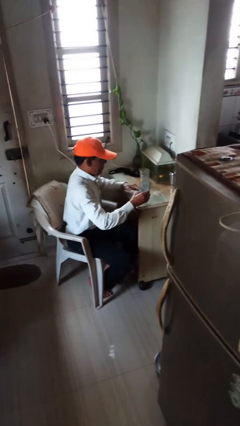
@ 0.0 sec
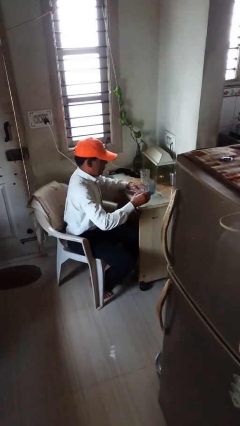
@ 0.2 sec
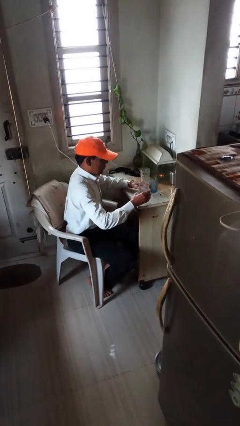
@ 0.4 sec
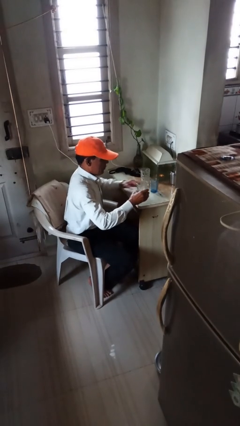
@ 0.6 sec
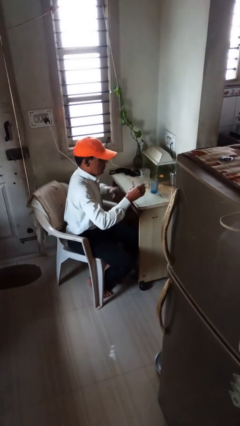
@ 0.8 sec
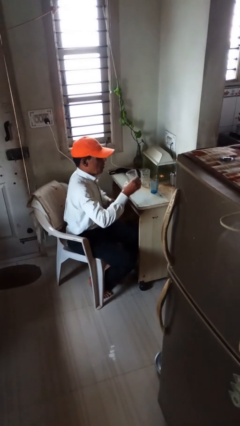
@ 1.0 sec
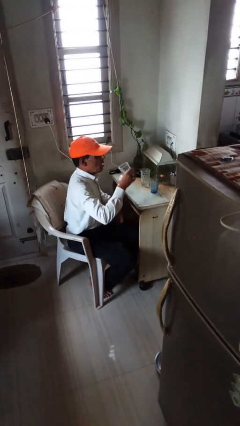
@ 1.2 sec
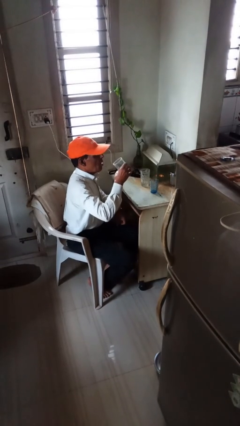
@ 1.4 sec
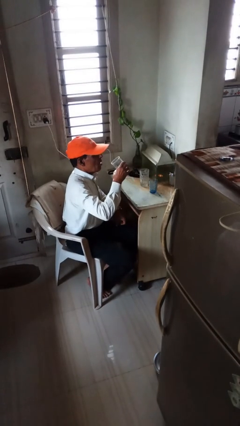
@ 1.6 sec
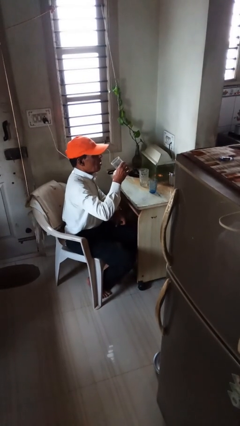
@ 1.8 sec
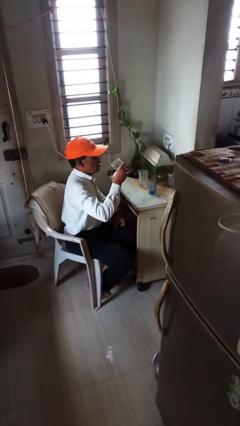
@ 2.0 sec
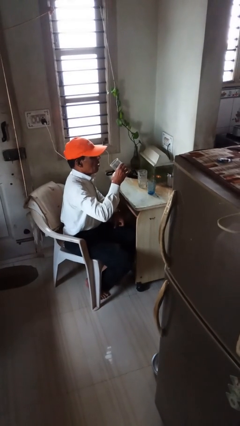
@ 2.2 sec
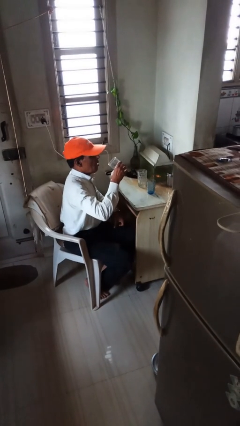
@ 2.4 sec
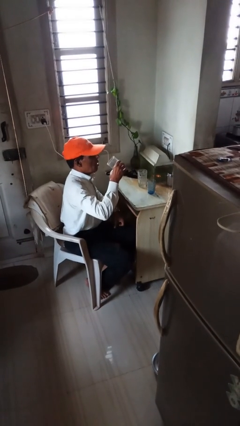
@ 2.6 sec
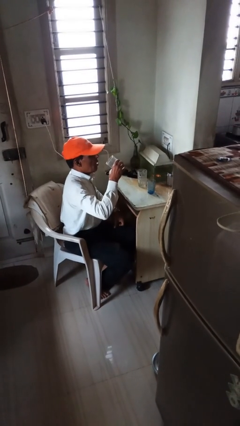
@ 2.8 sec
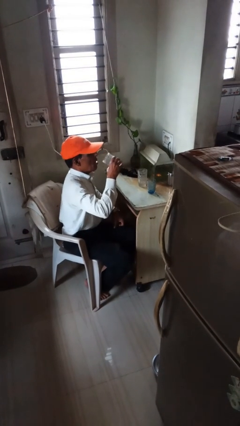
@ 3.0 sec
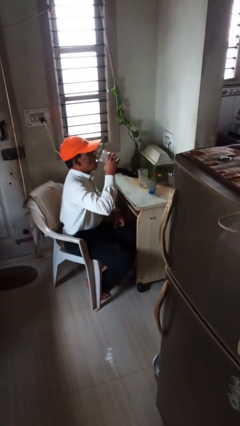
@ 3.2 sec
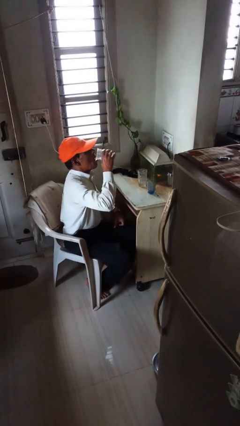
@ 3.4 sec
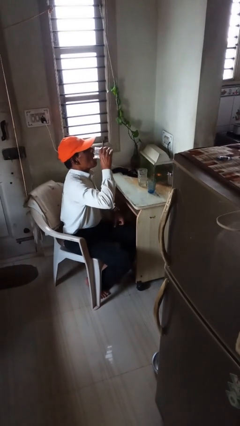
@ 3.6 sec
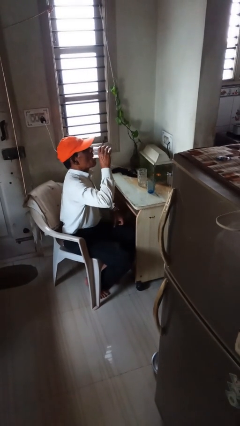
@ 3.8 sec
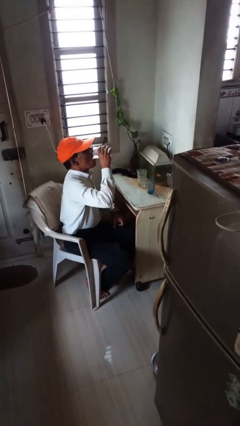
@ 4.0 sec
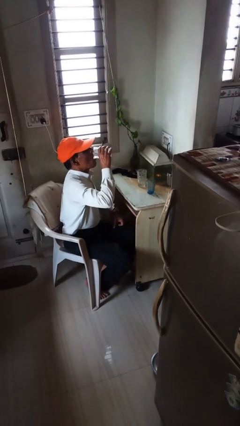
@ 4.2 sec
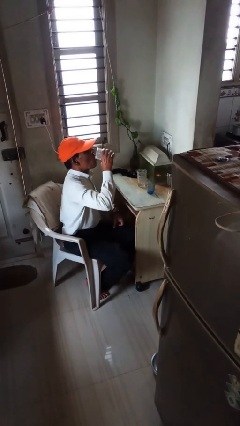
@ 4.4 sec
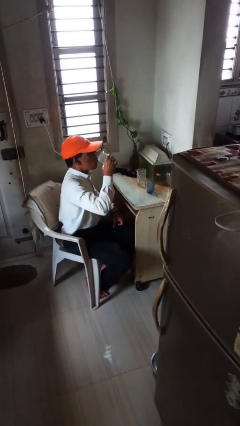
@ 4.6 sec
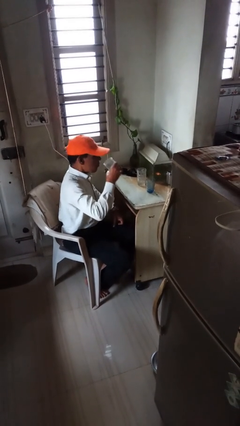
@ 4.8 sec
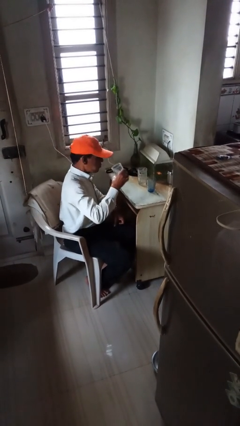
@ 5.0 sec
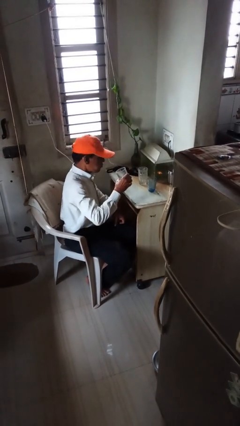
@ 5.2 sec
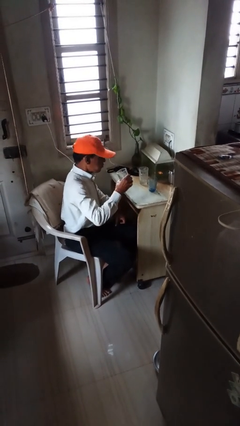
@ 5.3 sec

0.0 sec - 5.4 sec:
person drinks from shotglass

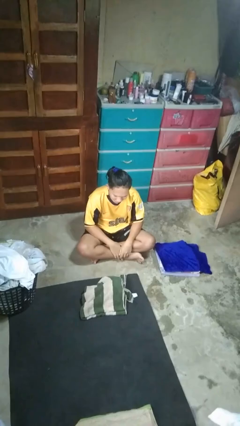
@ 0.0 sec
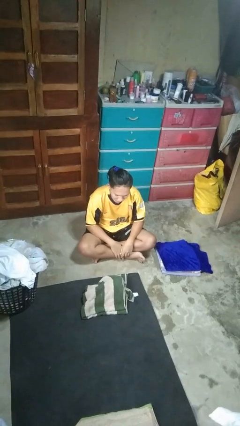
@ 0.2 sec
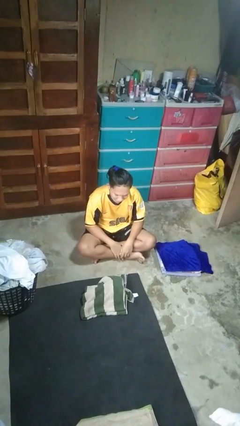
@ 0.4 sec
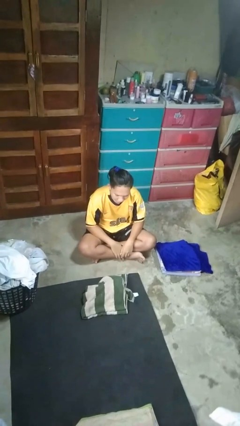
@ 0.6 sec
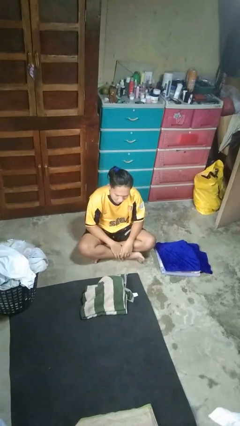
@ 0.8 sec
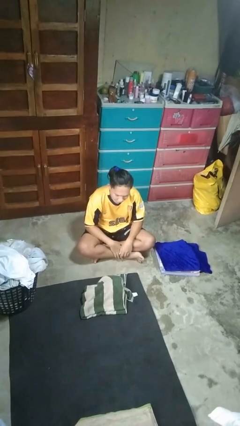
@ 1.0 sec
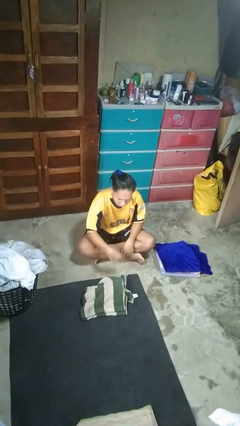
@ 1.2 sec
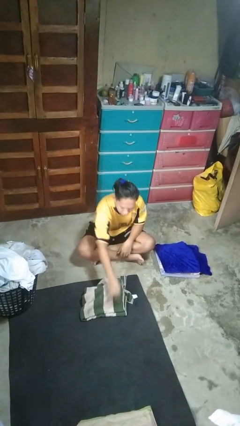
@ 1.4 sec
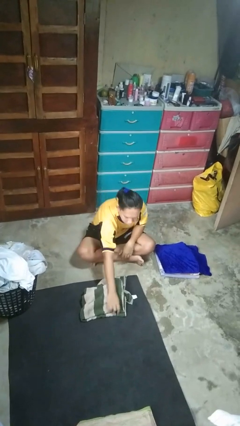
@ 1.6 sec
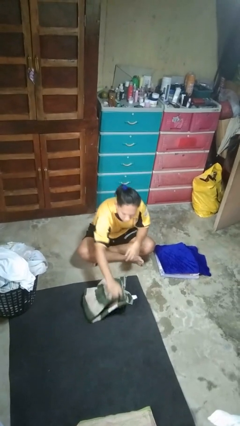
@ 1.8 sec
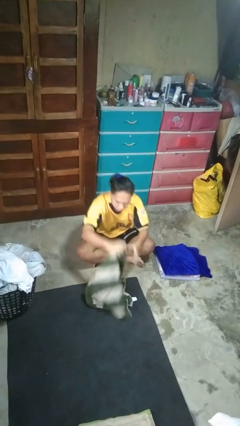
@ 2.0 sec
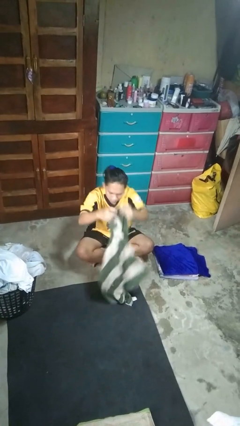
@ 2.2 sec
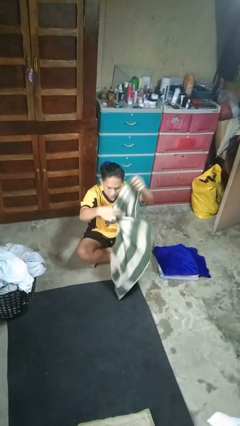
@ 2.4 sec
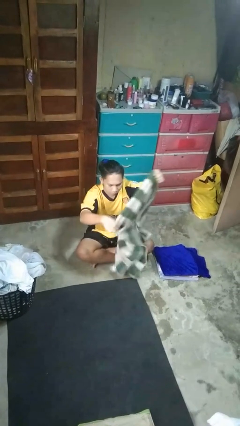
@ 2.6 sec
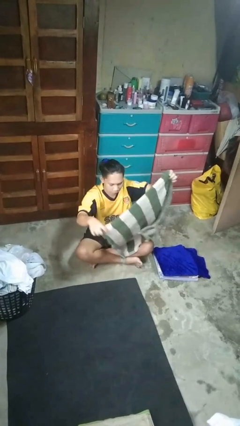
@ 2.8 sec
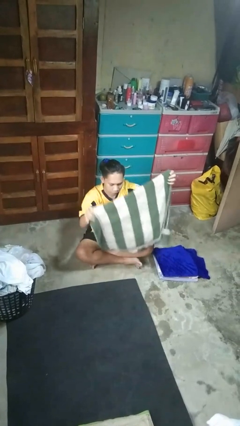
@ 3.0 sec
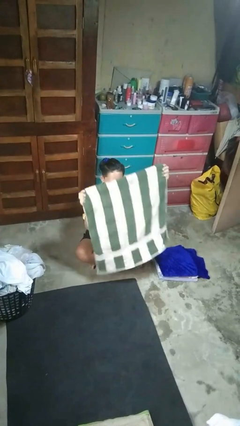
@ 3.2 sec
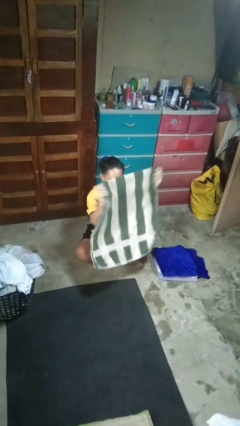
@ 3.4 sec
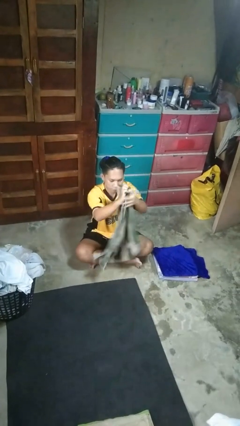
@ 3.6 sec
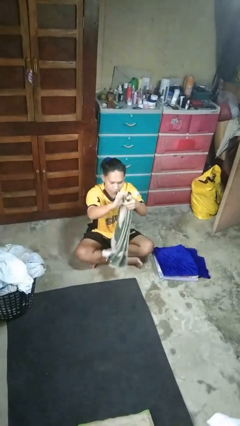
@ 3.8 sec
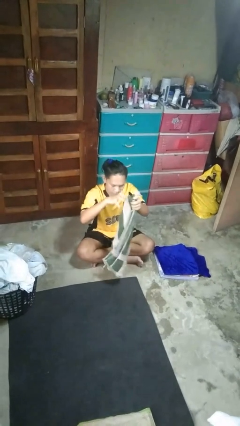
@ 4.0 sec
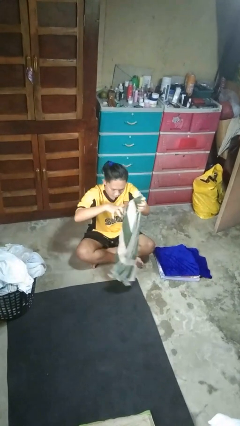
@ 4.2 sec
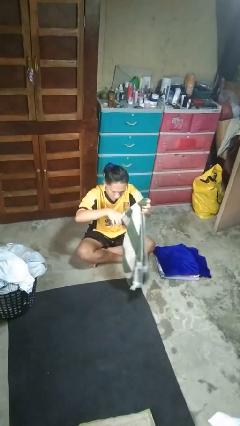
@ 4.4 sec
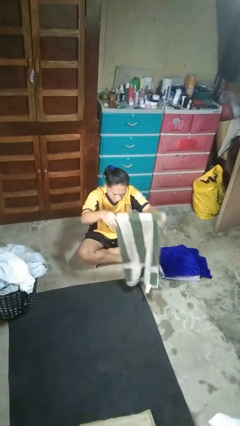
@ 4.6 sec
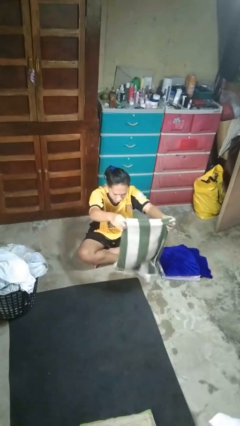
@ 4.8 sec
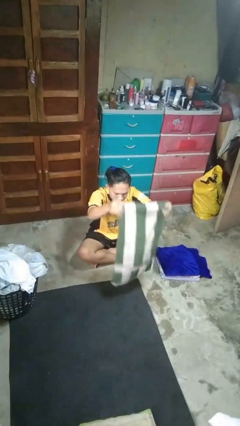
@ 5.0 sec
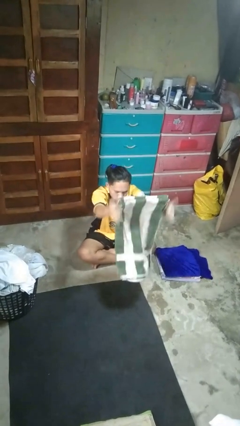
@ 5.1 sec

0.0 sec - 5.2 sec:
person folds towel

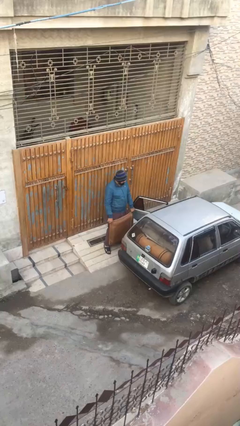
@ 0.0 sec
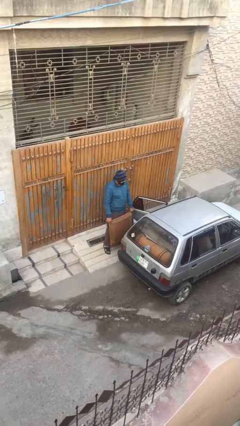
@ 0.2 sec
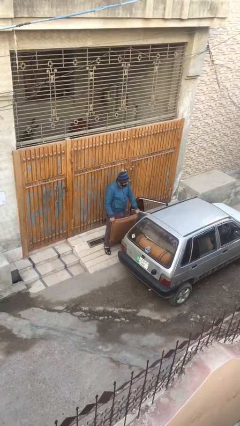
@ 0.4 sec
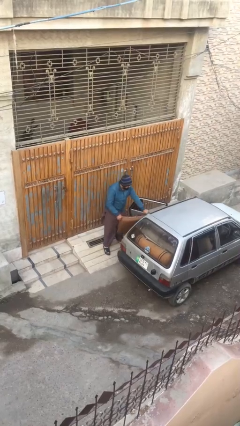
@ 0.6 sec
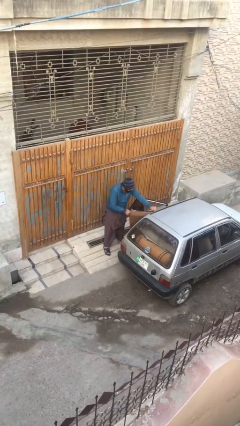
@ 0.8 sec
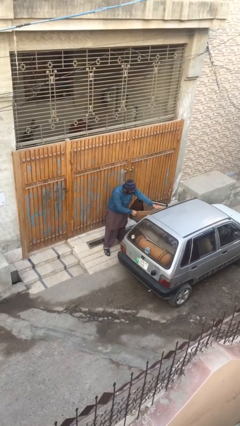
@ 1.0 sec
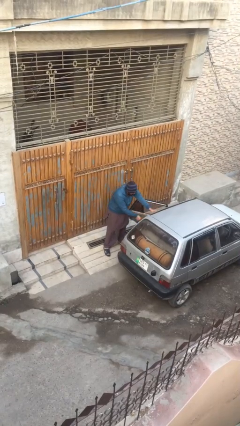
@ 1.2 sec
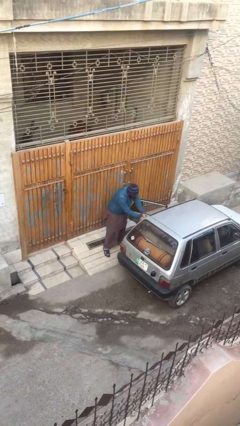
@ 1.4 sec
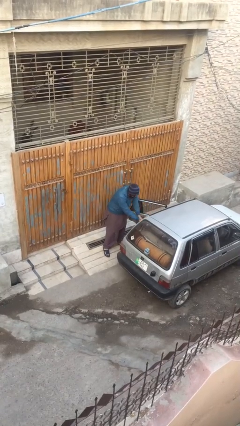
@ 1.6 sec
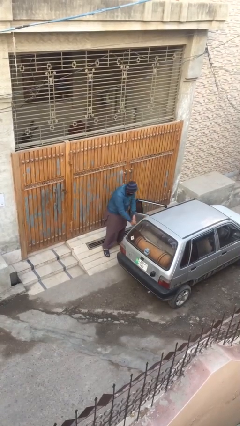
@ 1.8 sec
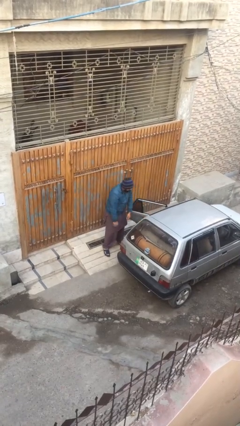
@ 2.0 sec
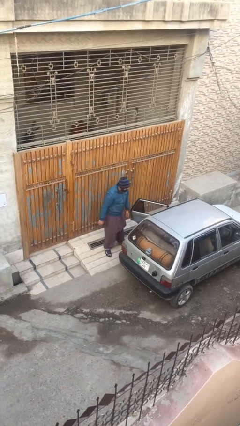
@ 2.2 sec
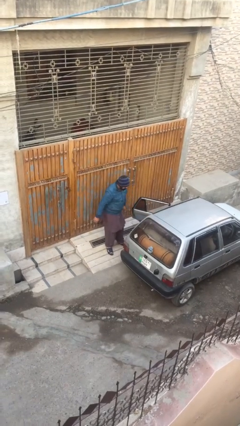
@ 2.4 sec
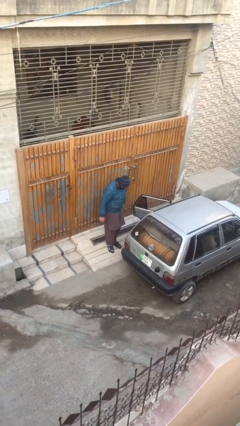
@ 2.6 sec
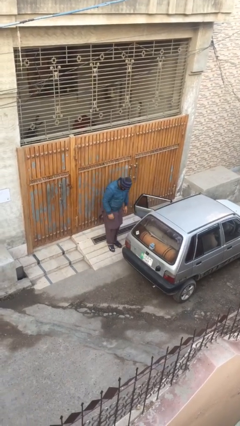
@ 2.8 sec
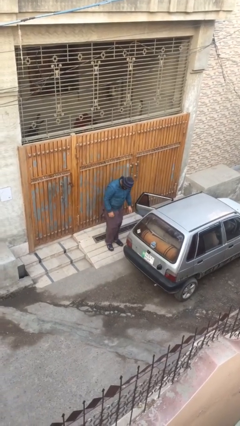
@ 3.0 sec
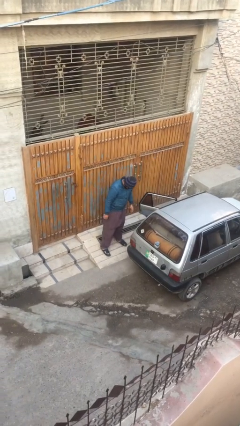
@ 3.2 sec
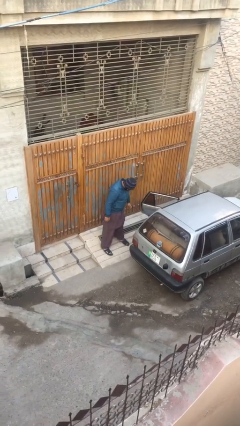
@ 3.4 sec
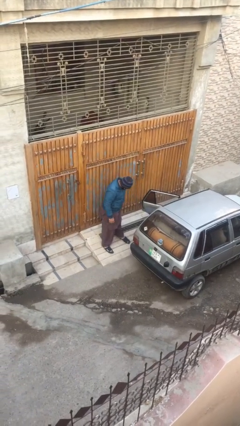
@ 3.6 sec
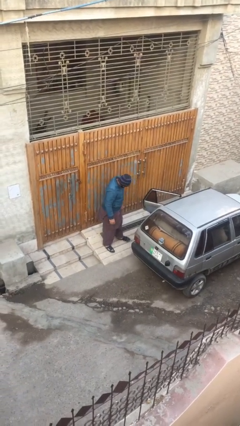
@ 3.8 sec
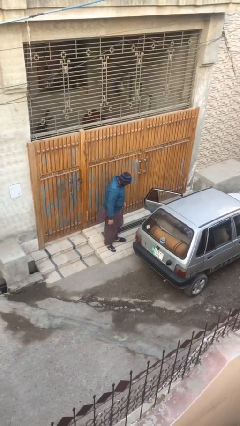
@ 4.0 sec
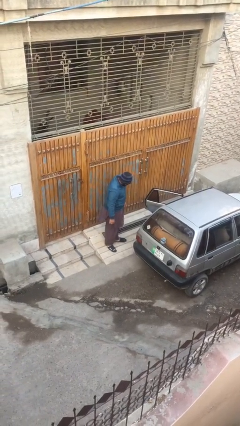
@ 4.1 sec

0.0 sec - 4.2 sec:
person loads car

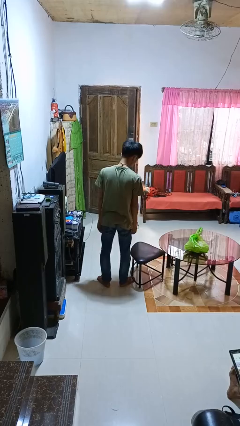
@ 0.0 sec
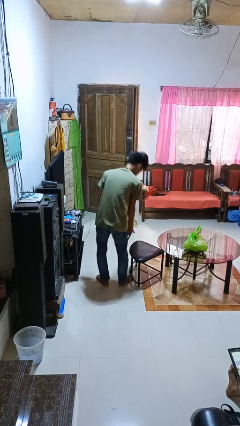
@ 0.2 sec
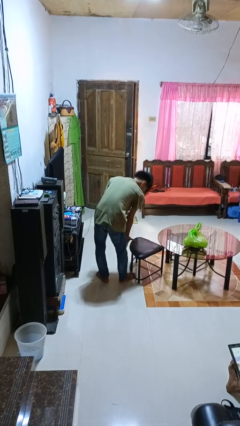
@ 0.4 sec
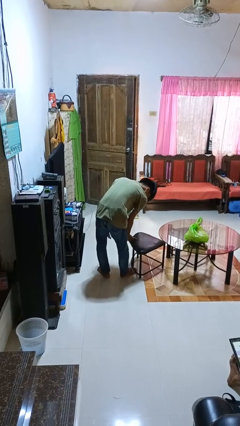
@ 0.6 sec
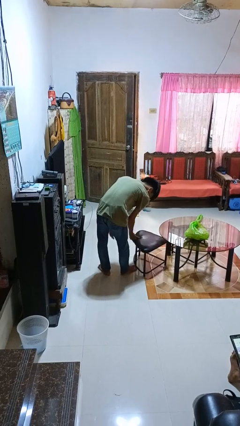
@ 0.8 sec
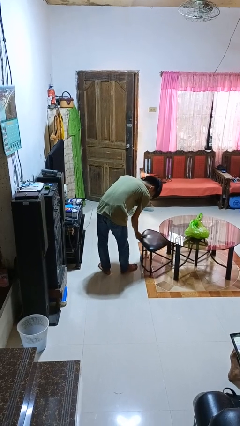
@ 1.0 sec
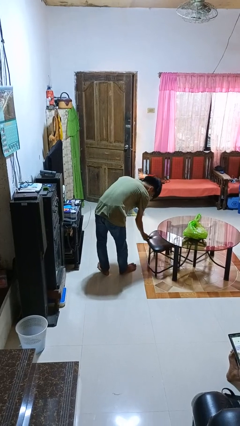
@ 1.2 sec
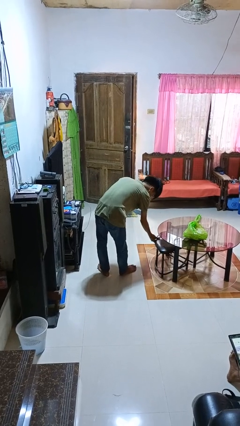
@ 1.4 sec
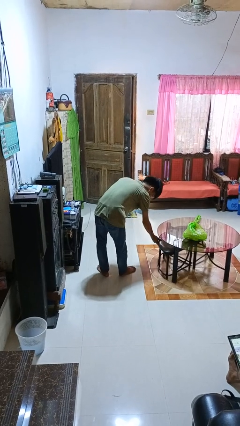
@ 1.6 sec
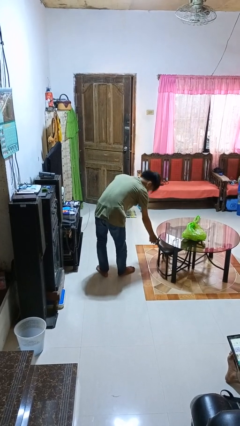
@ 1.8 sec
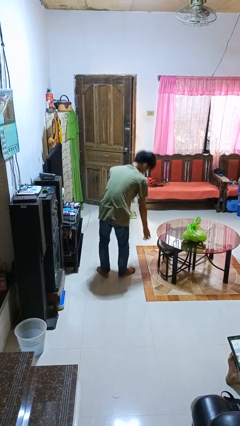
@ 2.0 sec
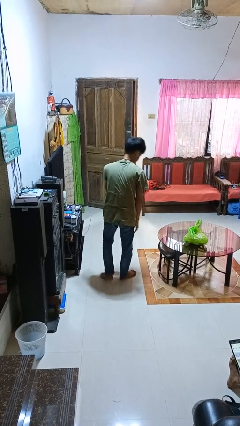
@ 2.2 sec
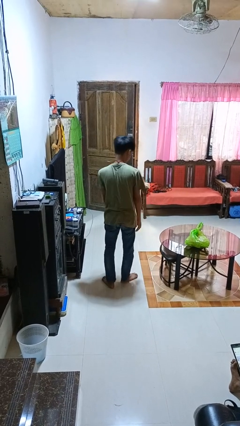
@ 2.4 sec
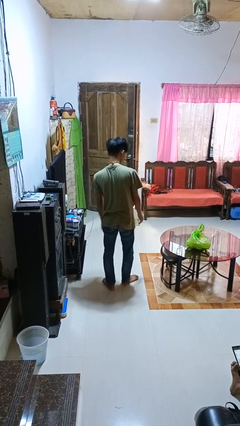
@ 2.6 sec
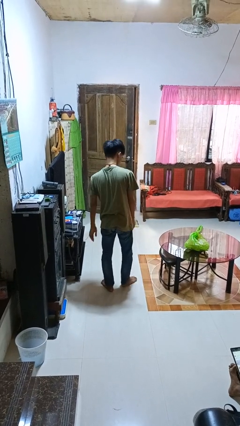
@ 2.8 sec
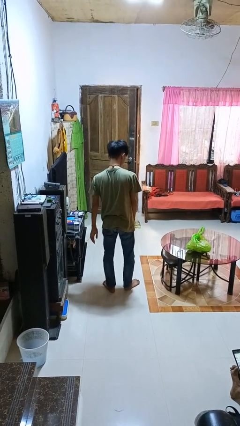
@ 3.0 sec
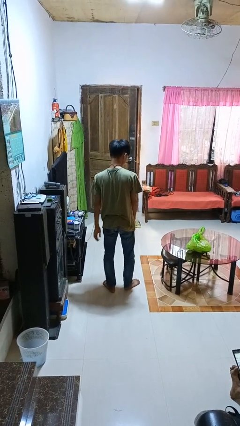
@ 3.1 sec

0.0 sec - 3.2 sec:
person pushes in chair
